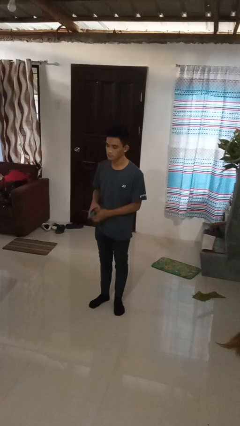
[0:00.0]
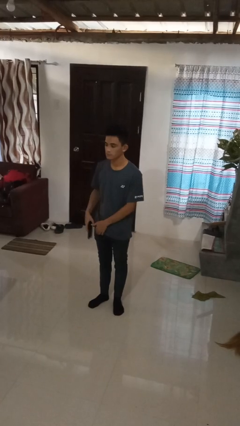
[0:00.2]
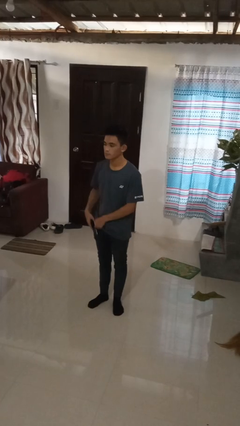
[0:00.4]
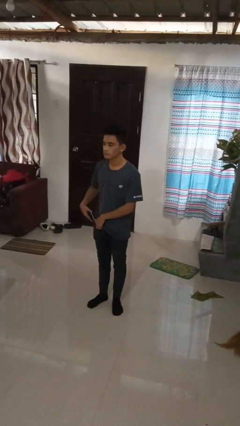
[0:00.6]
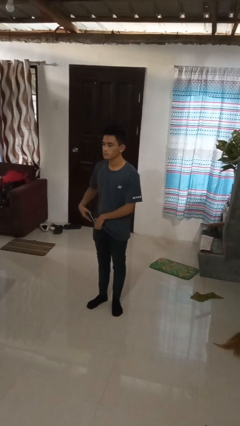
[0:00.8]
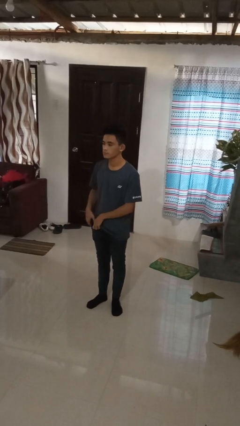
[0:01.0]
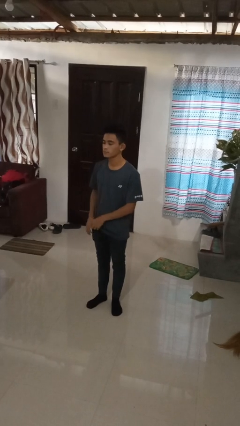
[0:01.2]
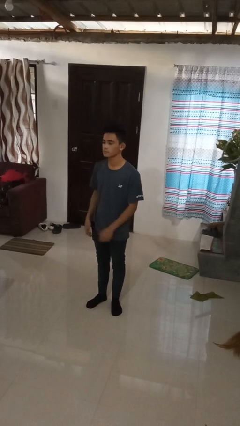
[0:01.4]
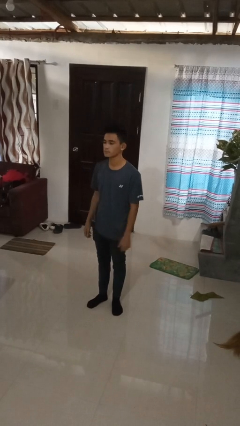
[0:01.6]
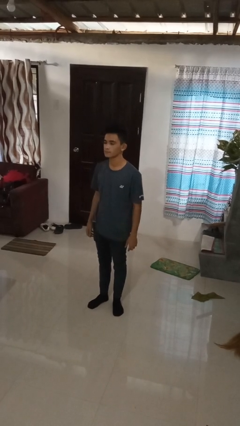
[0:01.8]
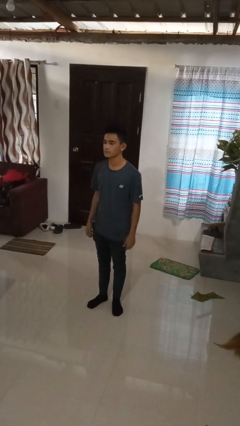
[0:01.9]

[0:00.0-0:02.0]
person puts phone into pocket

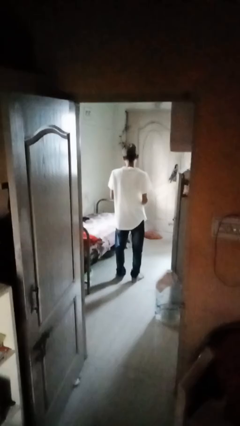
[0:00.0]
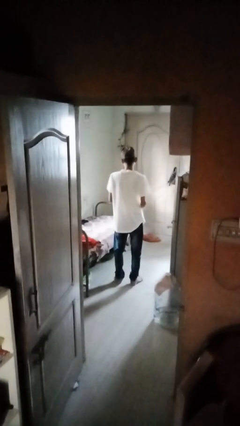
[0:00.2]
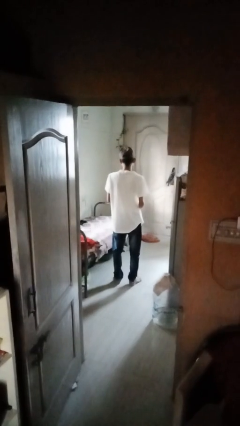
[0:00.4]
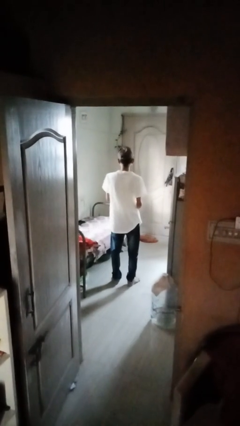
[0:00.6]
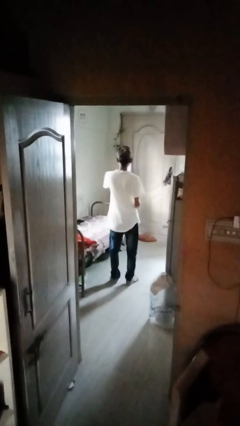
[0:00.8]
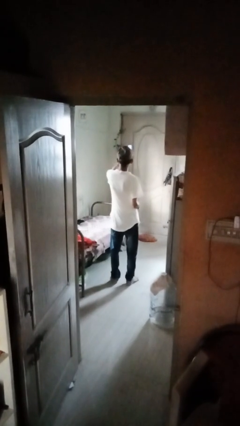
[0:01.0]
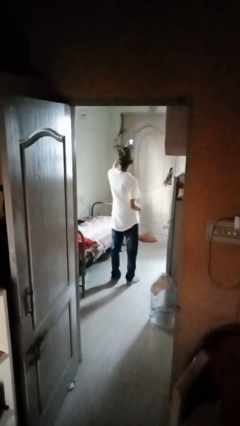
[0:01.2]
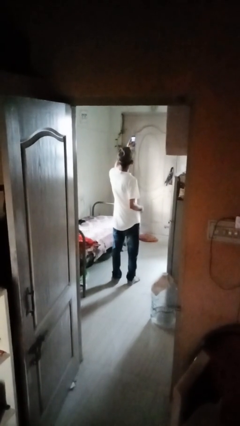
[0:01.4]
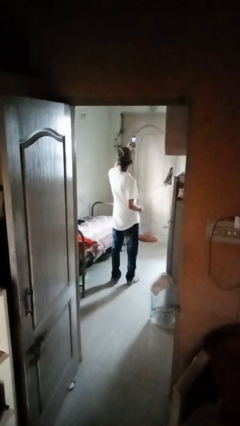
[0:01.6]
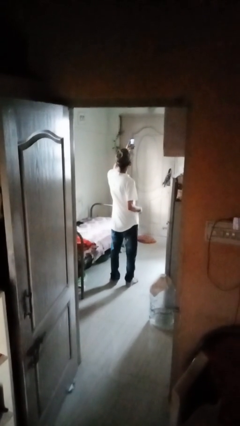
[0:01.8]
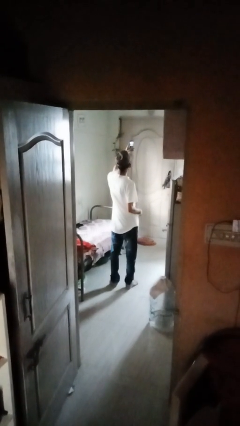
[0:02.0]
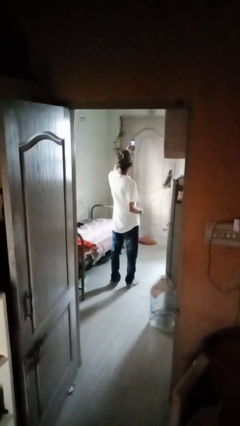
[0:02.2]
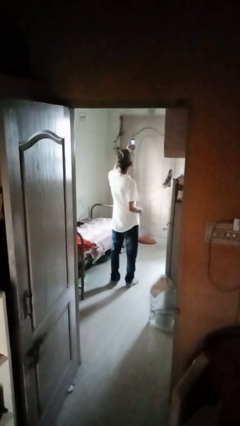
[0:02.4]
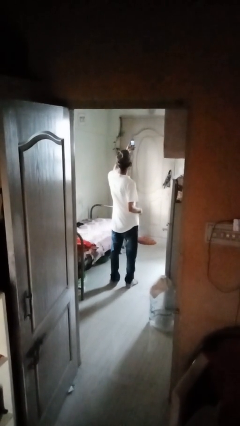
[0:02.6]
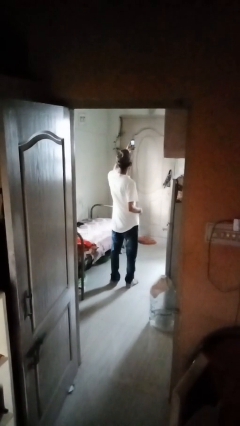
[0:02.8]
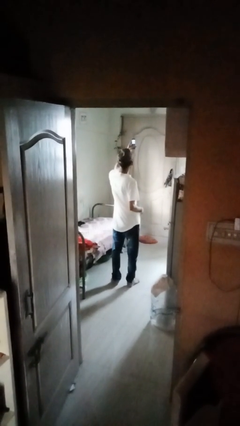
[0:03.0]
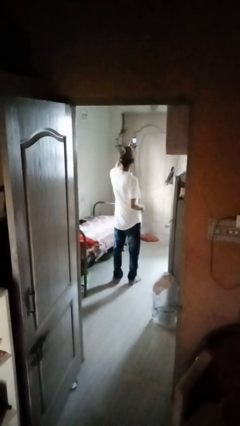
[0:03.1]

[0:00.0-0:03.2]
person takes selfie

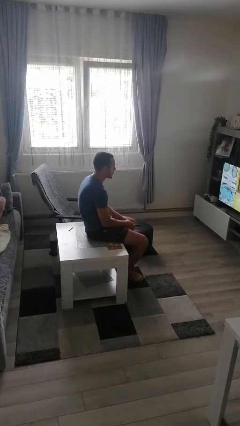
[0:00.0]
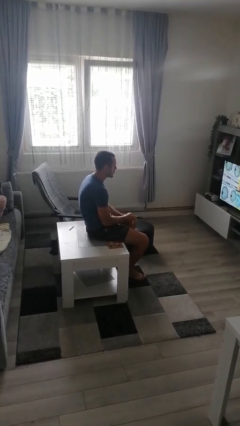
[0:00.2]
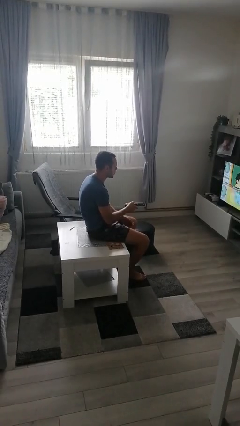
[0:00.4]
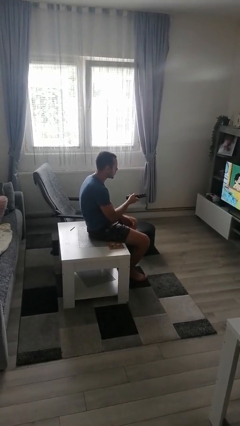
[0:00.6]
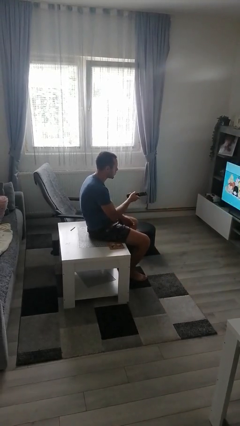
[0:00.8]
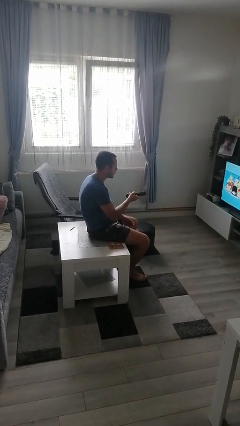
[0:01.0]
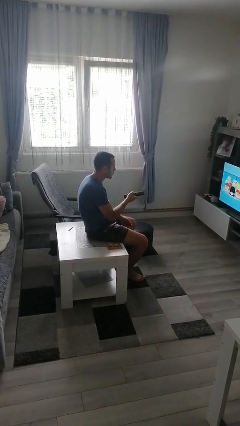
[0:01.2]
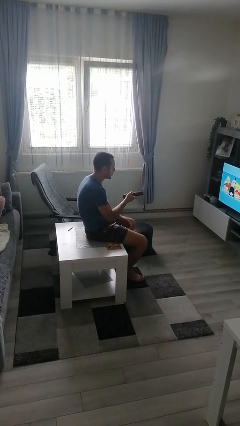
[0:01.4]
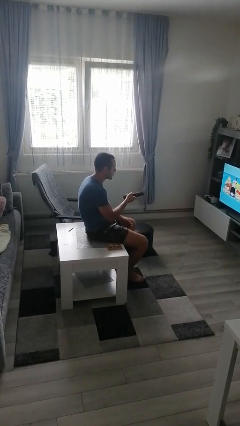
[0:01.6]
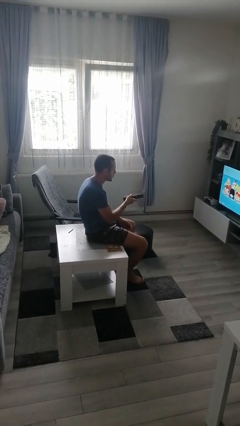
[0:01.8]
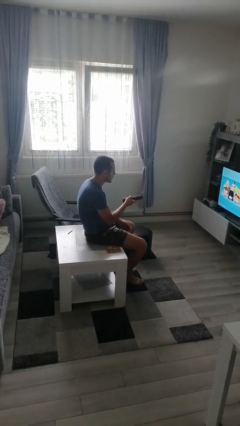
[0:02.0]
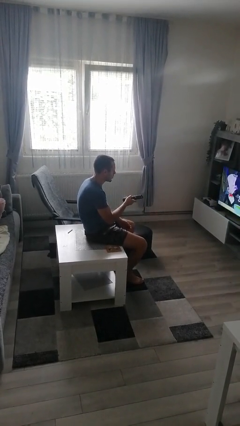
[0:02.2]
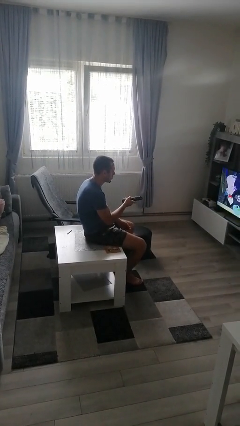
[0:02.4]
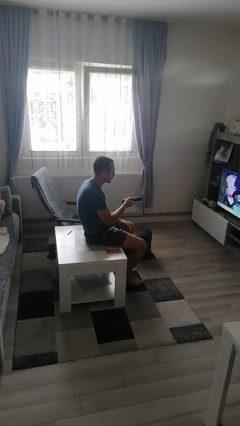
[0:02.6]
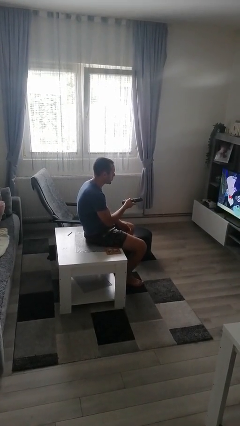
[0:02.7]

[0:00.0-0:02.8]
person uses television remote

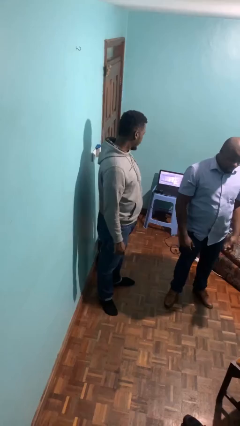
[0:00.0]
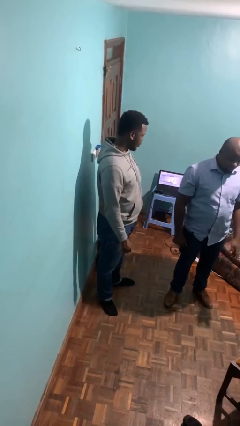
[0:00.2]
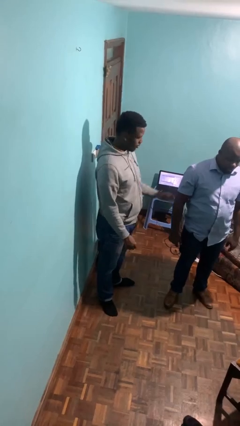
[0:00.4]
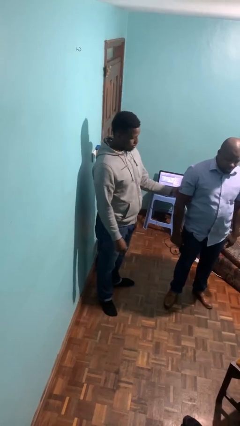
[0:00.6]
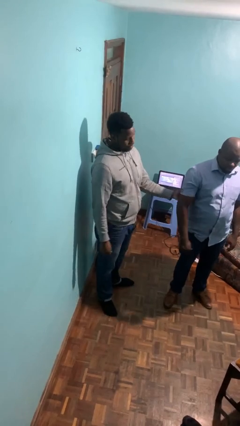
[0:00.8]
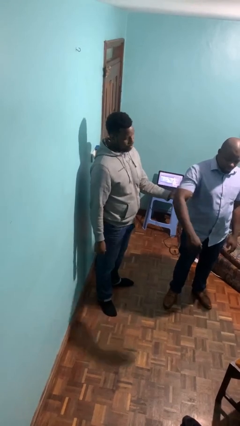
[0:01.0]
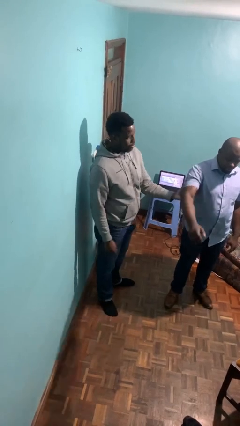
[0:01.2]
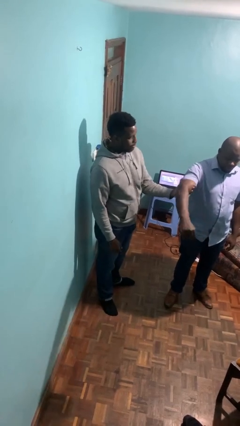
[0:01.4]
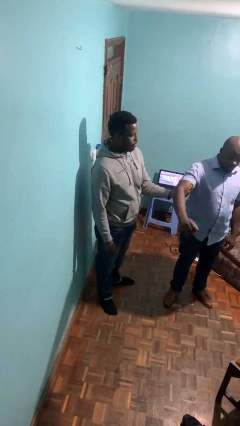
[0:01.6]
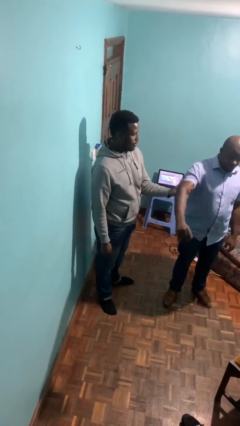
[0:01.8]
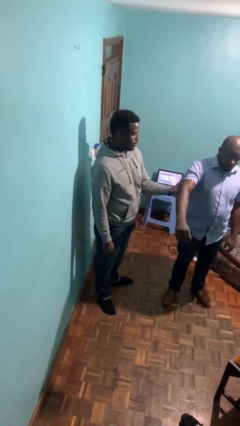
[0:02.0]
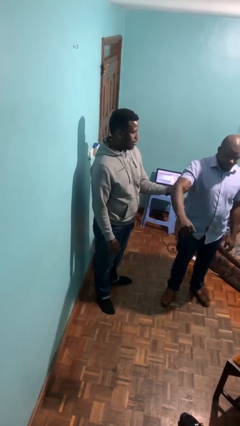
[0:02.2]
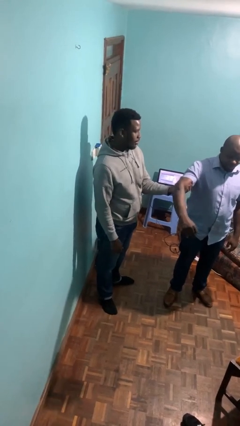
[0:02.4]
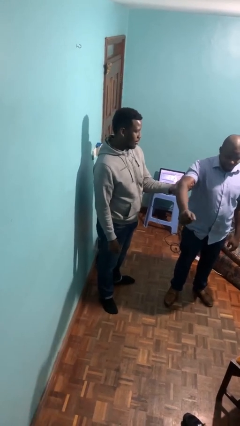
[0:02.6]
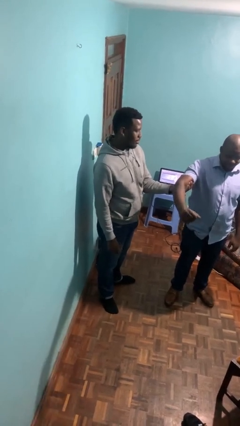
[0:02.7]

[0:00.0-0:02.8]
person grabs person by forearm

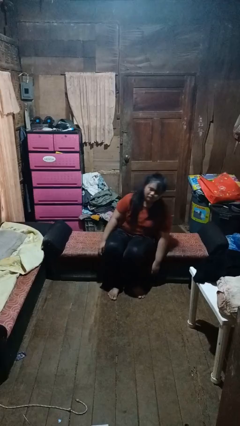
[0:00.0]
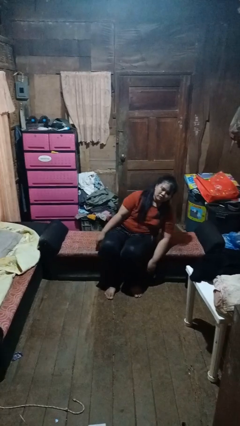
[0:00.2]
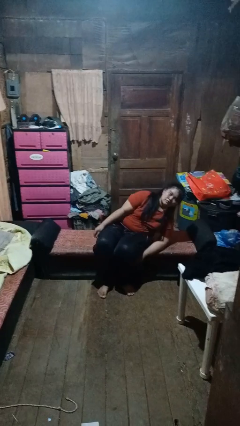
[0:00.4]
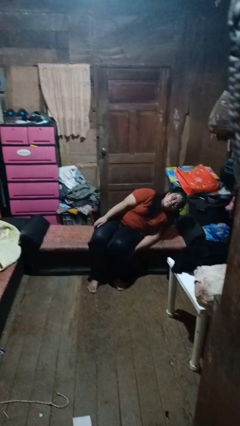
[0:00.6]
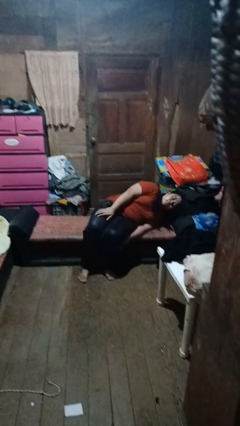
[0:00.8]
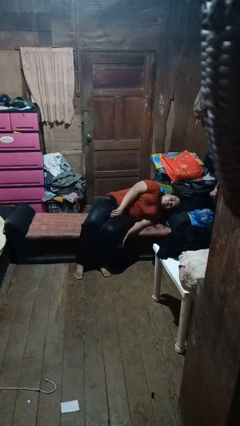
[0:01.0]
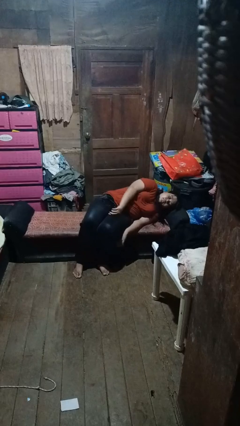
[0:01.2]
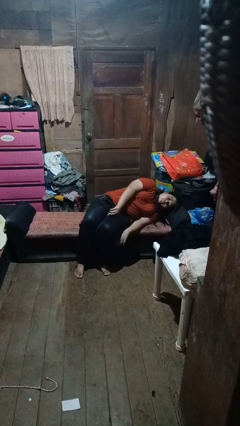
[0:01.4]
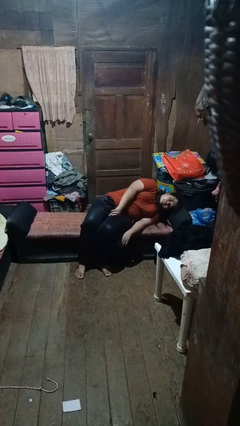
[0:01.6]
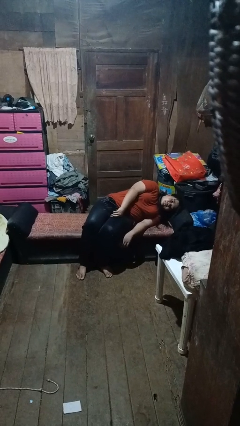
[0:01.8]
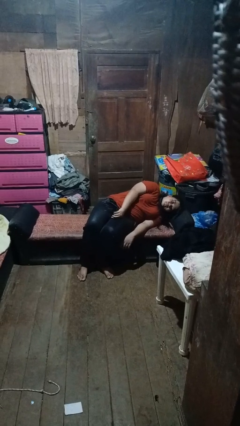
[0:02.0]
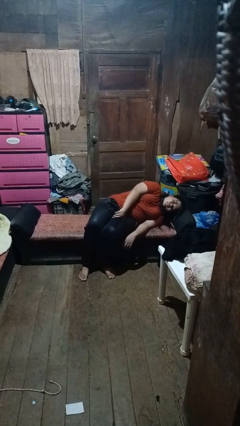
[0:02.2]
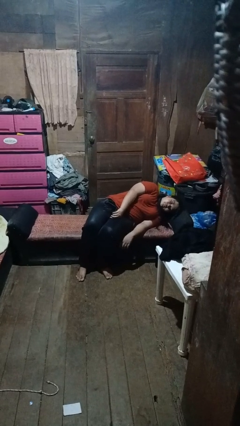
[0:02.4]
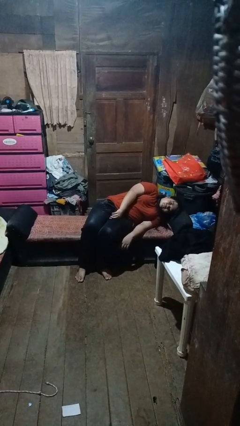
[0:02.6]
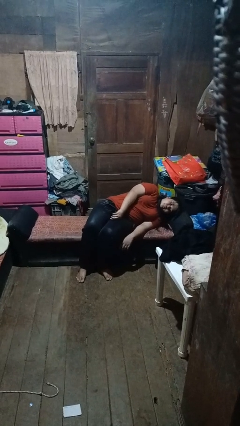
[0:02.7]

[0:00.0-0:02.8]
person lies down on couch

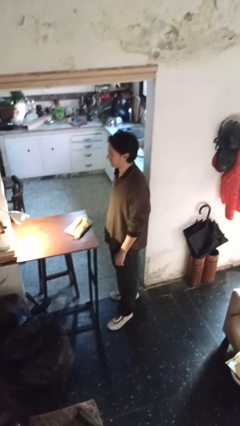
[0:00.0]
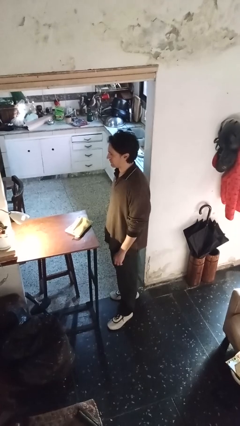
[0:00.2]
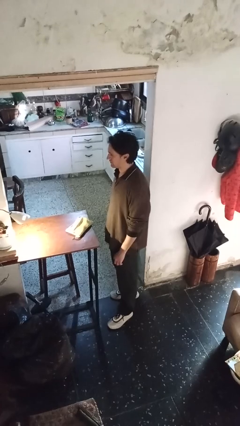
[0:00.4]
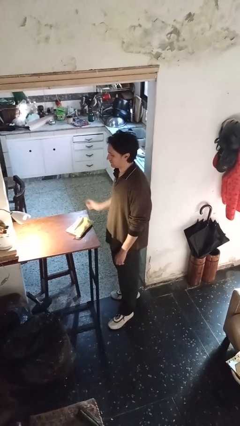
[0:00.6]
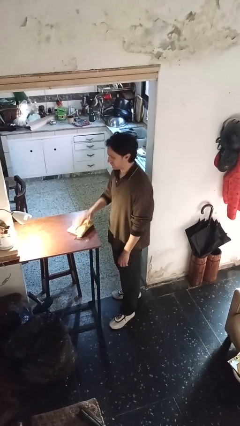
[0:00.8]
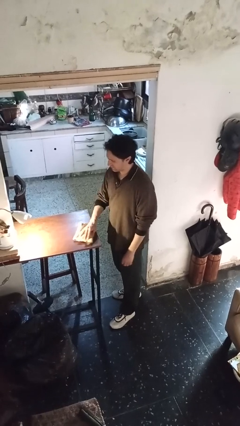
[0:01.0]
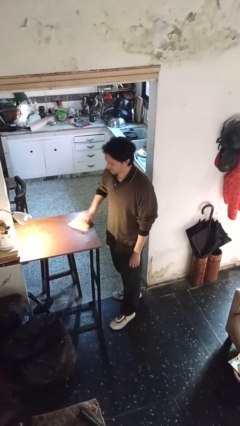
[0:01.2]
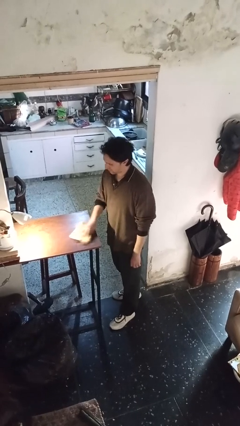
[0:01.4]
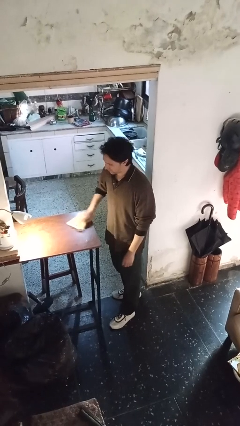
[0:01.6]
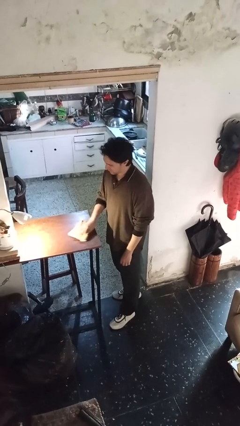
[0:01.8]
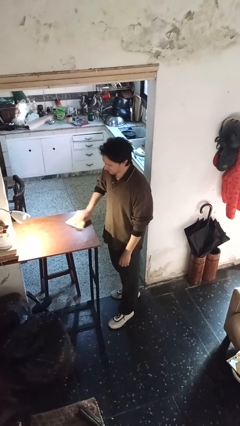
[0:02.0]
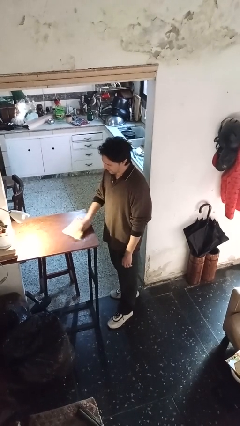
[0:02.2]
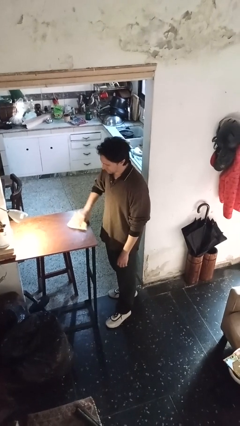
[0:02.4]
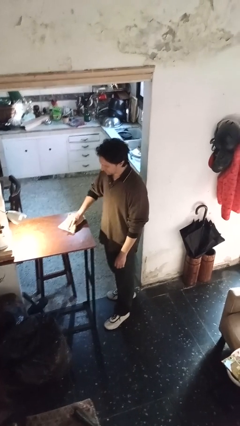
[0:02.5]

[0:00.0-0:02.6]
person cleans table with rag

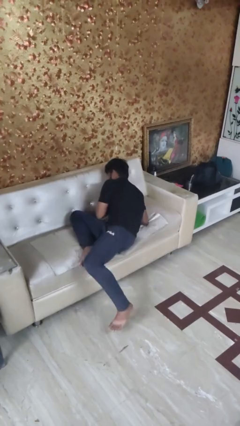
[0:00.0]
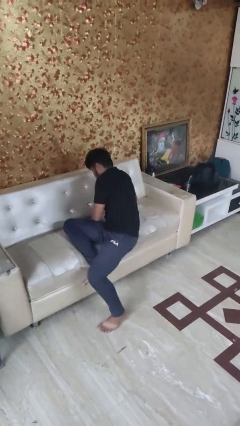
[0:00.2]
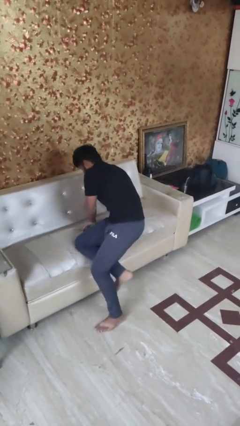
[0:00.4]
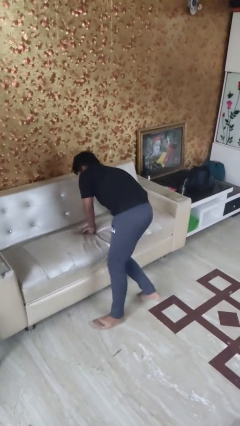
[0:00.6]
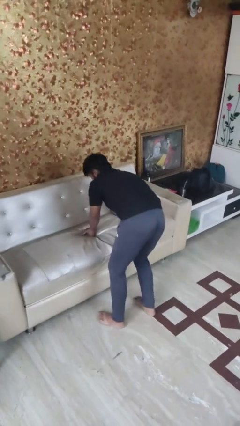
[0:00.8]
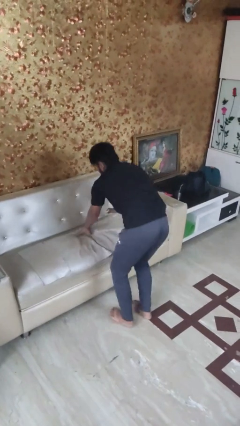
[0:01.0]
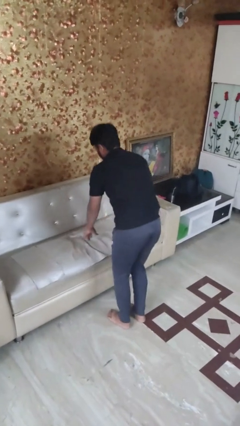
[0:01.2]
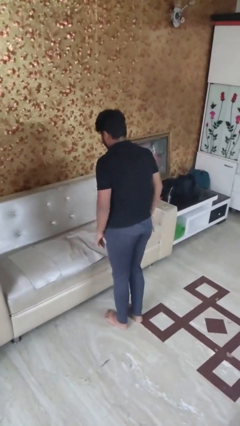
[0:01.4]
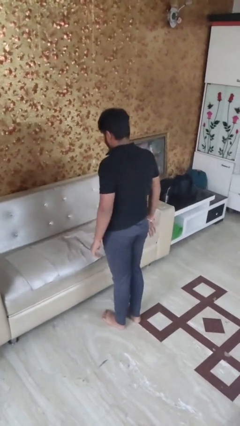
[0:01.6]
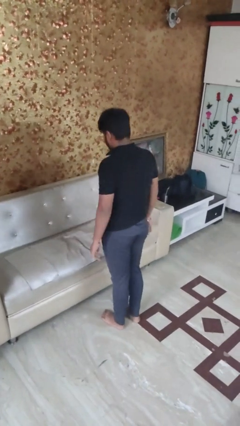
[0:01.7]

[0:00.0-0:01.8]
person stands up
